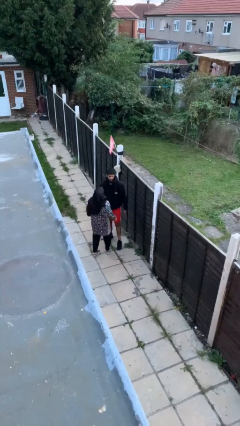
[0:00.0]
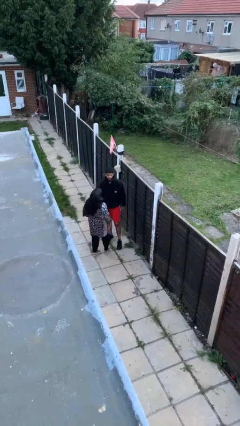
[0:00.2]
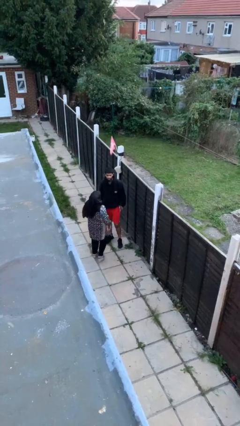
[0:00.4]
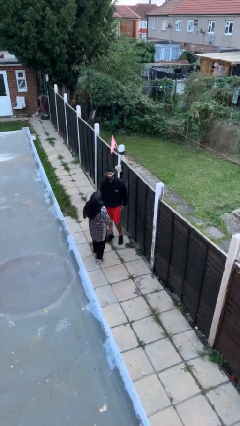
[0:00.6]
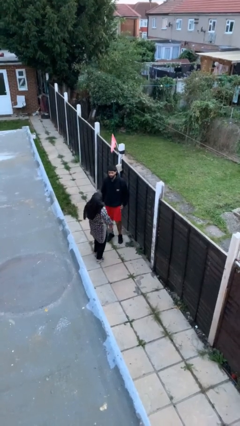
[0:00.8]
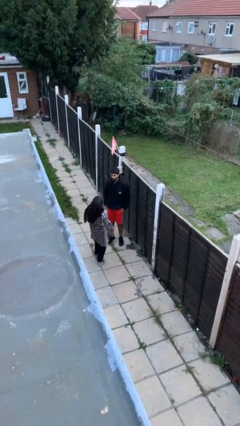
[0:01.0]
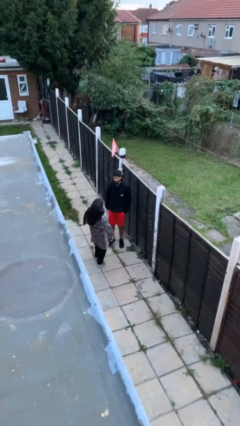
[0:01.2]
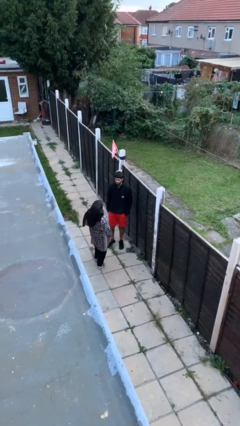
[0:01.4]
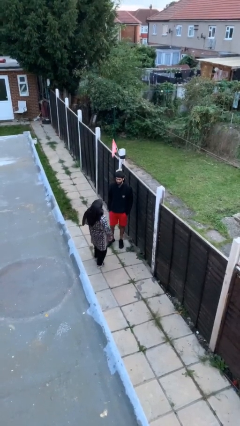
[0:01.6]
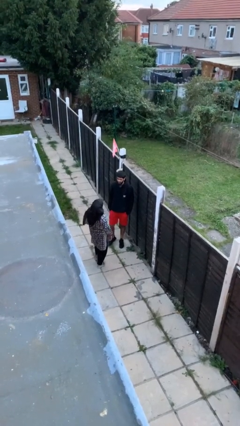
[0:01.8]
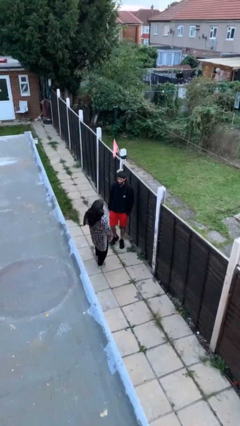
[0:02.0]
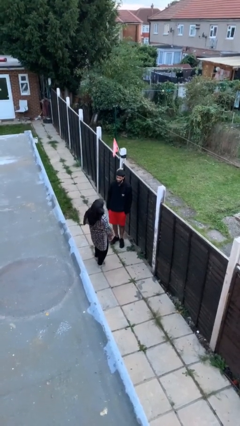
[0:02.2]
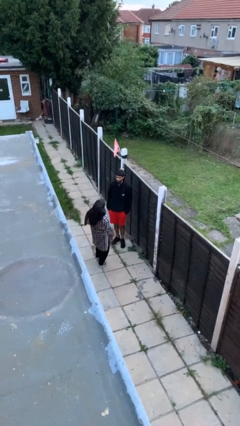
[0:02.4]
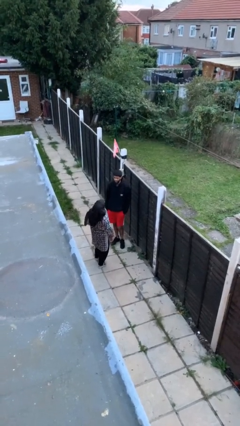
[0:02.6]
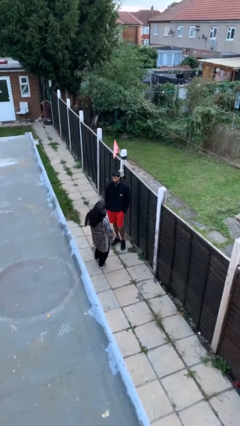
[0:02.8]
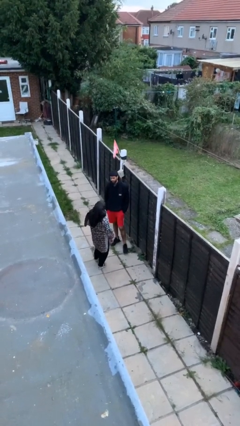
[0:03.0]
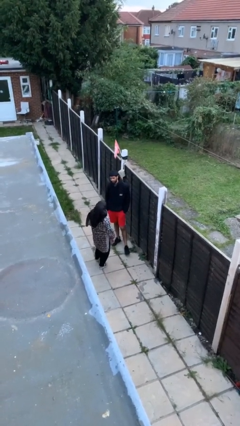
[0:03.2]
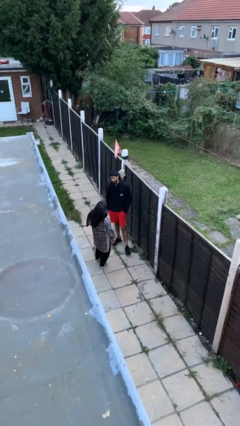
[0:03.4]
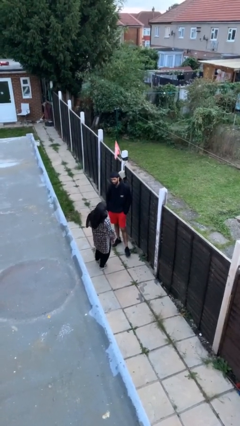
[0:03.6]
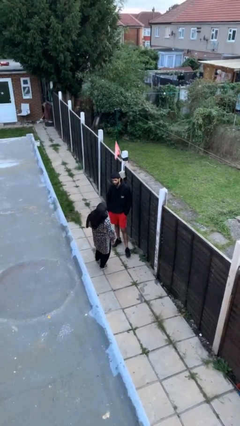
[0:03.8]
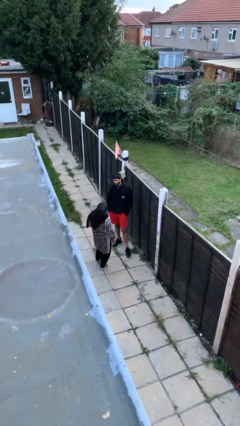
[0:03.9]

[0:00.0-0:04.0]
person talks to person

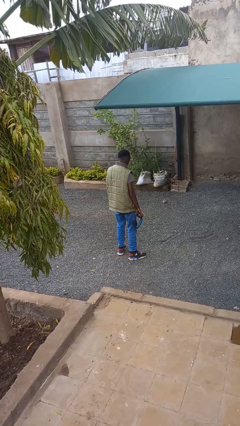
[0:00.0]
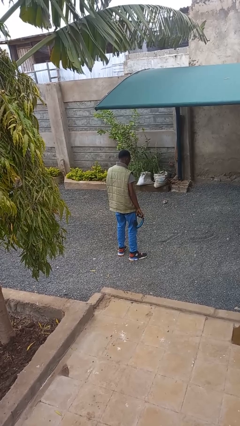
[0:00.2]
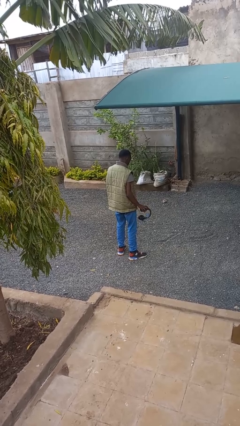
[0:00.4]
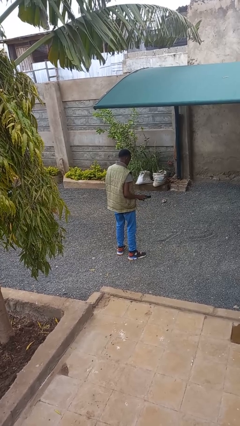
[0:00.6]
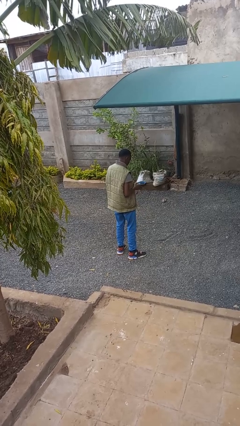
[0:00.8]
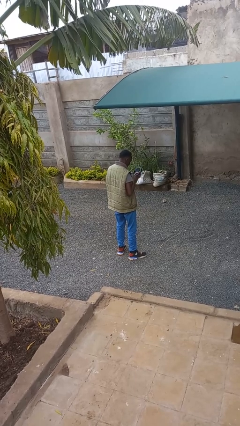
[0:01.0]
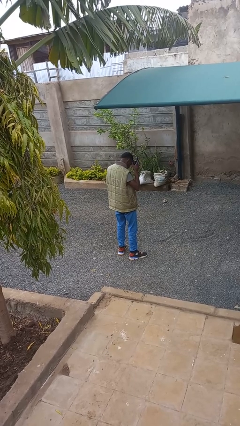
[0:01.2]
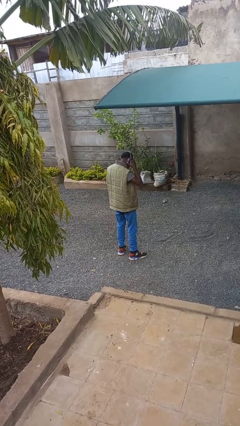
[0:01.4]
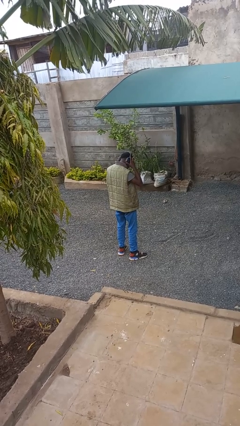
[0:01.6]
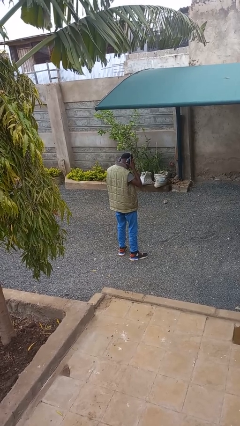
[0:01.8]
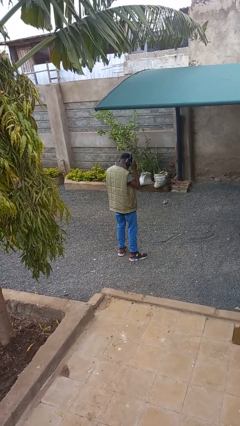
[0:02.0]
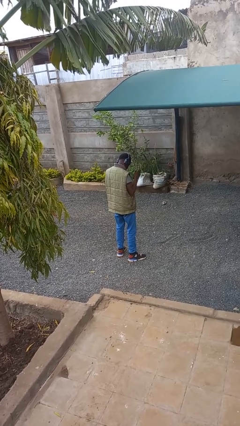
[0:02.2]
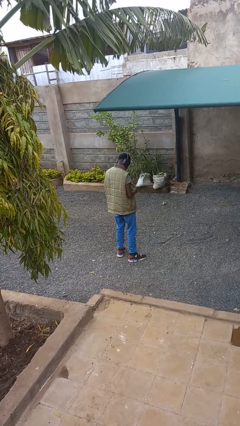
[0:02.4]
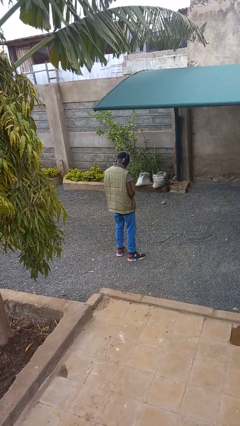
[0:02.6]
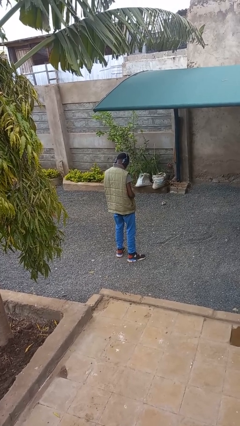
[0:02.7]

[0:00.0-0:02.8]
person puts on headphones

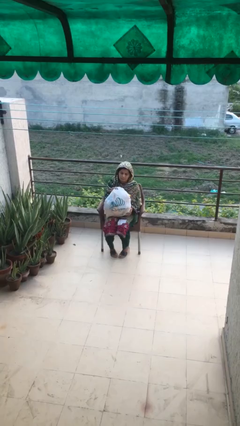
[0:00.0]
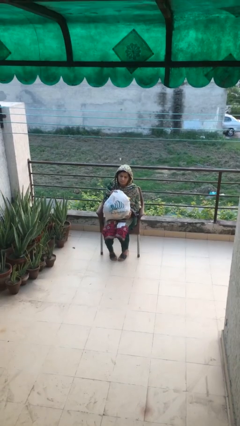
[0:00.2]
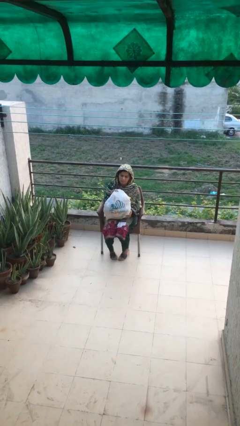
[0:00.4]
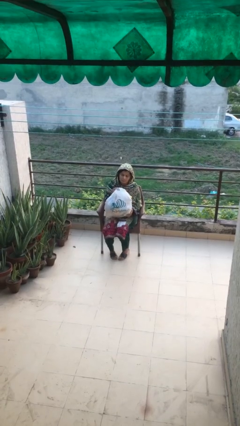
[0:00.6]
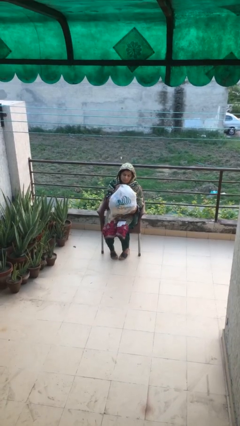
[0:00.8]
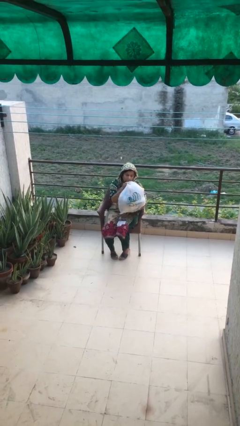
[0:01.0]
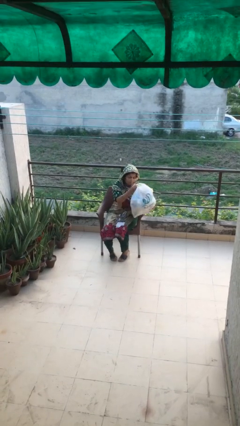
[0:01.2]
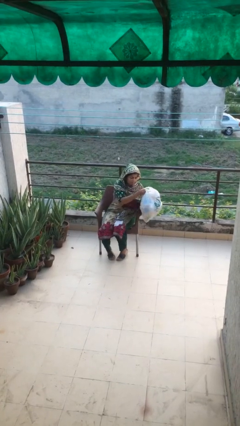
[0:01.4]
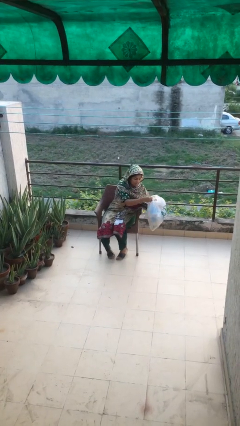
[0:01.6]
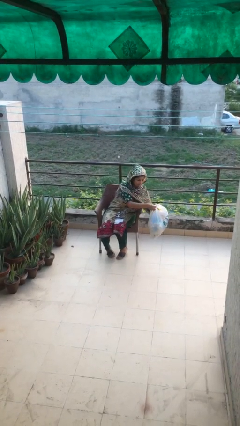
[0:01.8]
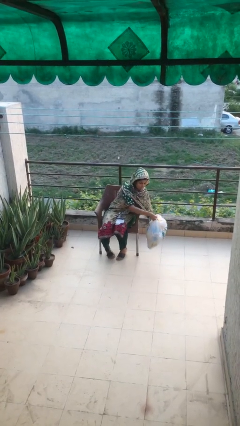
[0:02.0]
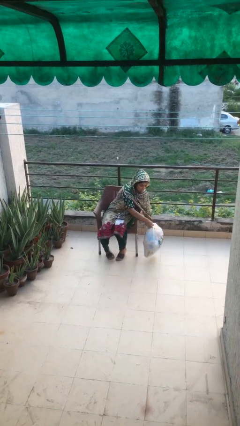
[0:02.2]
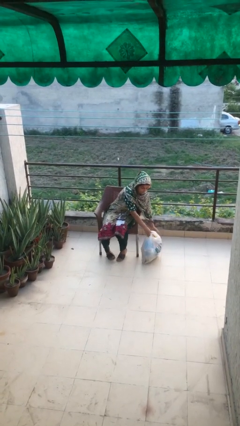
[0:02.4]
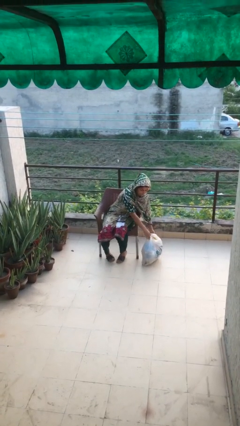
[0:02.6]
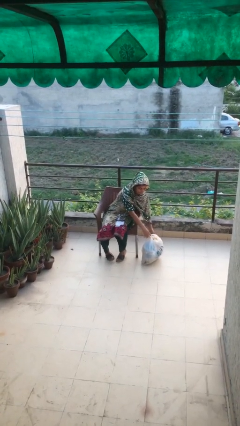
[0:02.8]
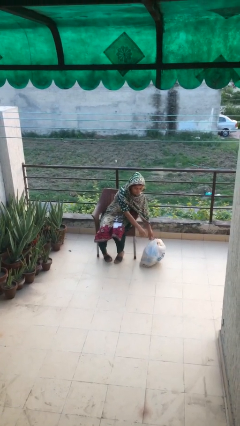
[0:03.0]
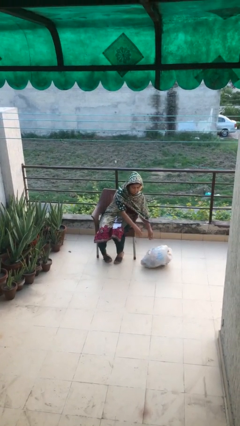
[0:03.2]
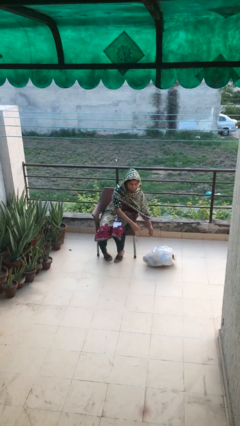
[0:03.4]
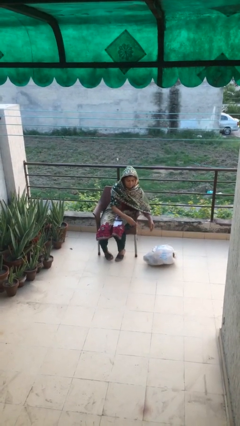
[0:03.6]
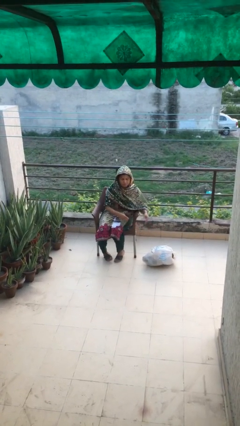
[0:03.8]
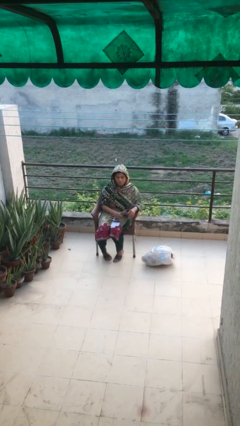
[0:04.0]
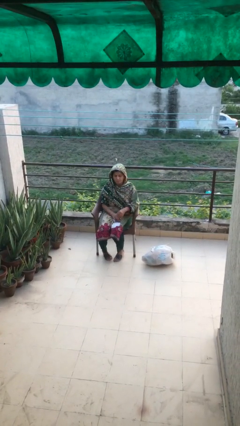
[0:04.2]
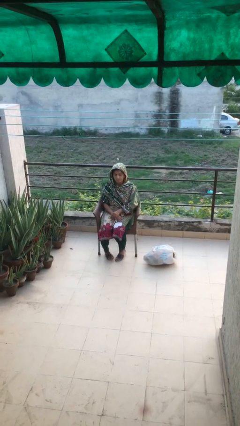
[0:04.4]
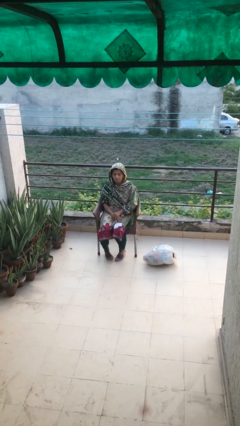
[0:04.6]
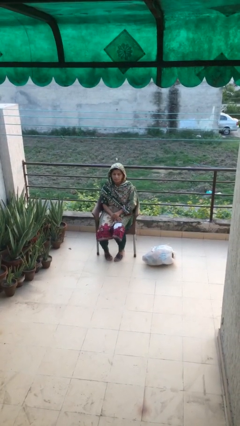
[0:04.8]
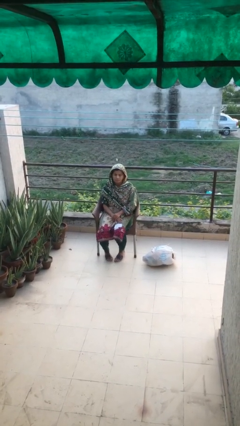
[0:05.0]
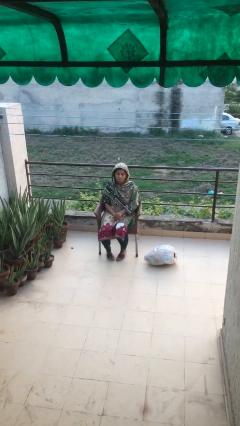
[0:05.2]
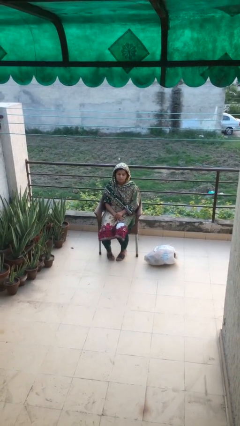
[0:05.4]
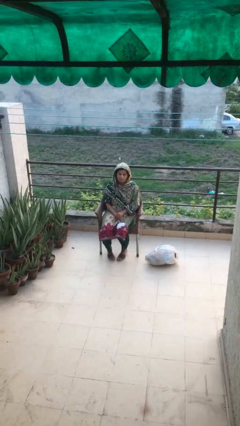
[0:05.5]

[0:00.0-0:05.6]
person puts down object on floor

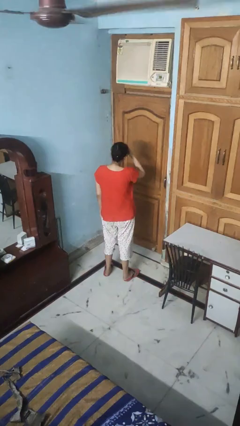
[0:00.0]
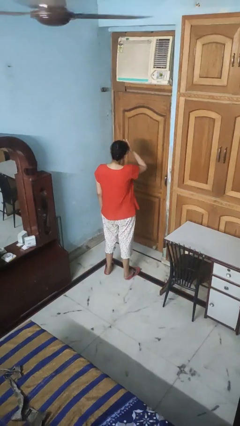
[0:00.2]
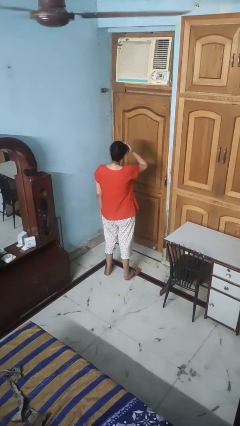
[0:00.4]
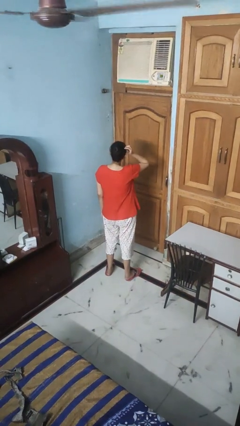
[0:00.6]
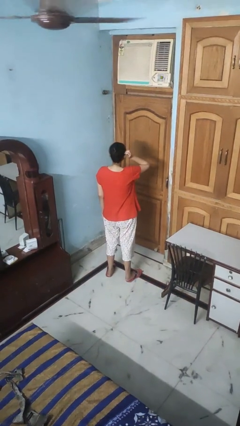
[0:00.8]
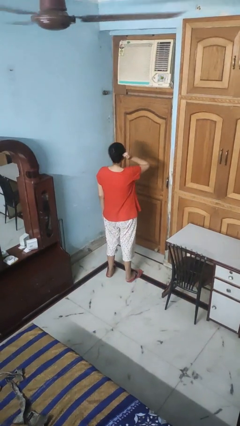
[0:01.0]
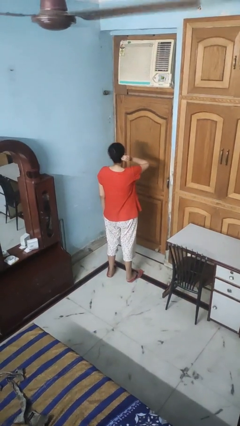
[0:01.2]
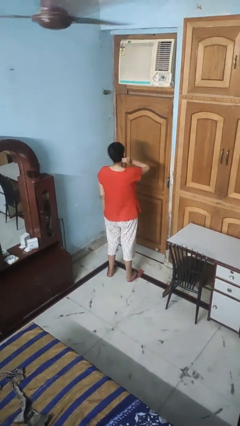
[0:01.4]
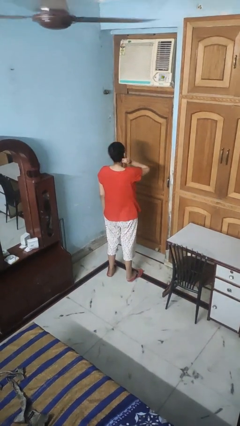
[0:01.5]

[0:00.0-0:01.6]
person strokes hair

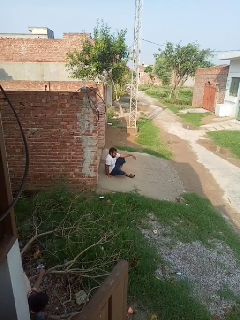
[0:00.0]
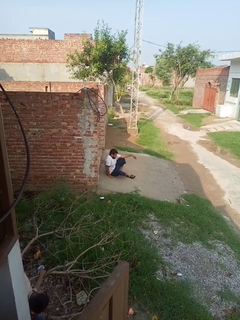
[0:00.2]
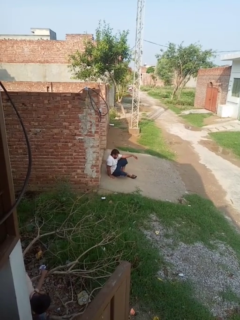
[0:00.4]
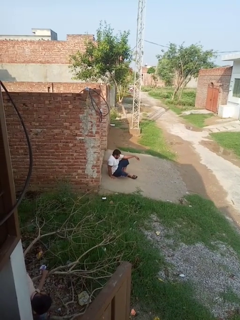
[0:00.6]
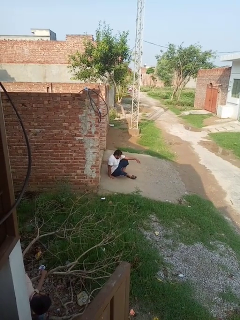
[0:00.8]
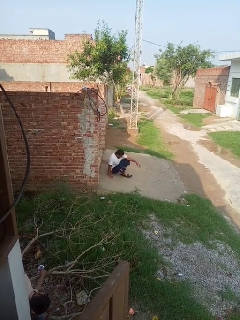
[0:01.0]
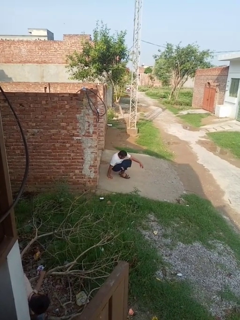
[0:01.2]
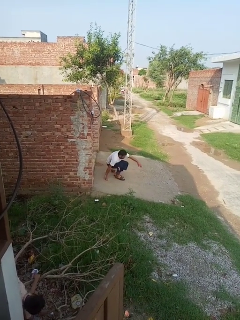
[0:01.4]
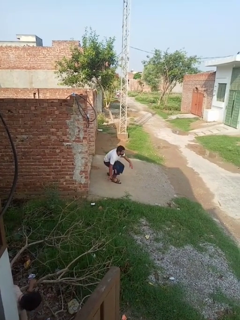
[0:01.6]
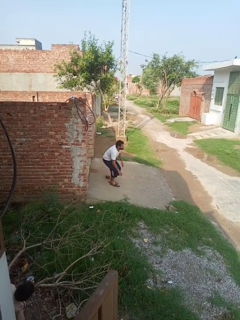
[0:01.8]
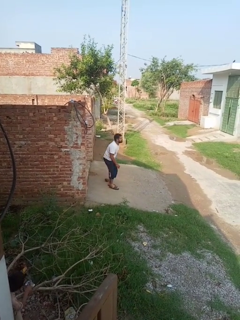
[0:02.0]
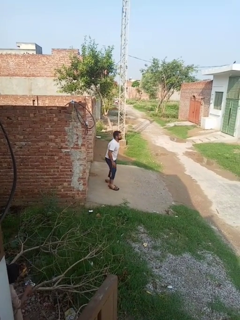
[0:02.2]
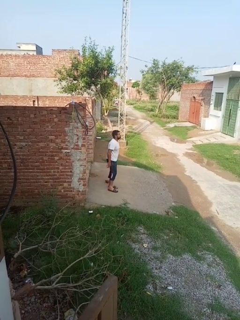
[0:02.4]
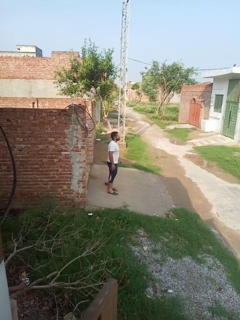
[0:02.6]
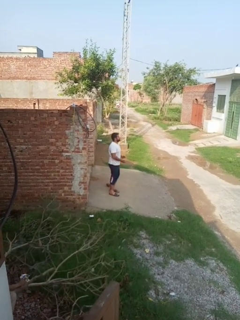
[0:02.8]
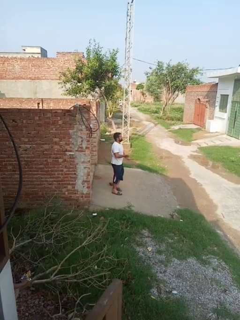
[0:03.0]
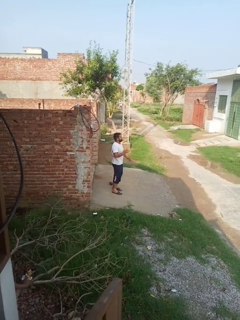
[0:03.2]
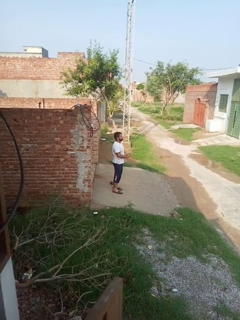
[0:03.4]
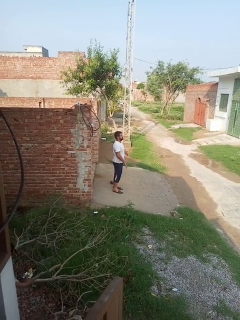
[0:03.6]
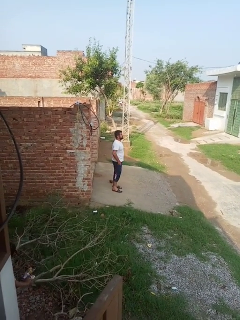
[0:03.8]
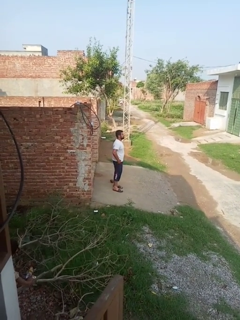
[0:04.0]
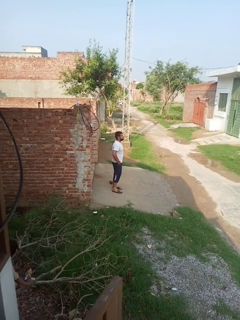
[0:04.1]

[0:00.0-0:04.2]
person stands up from floor

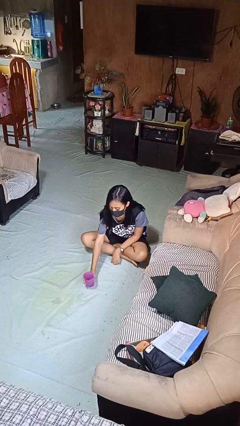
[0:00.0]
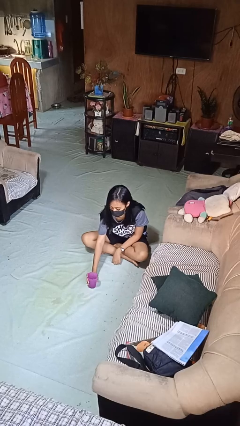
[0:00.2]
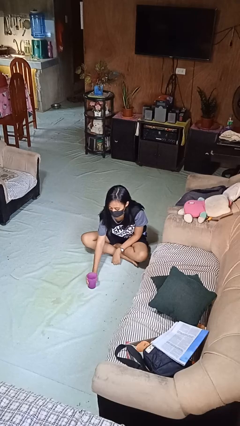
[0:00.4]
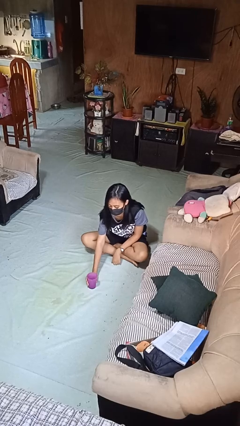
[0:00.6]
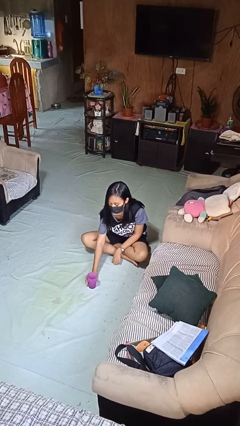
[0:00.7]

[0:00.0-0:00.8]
person sets upright glass
